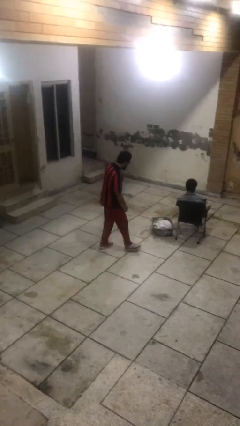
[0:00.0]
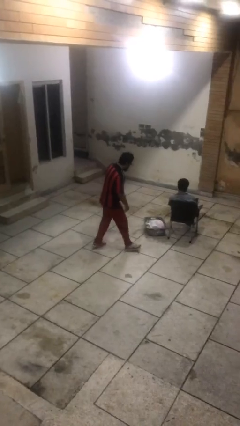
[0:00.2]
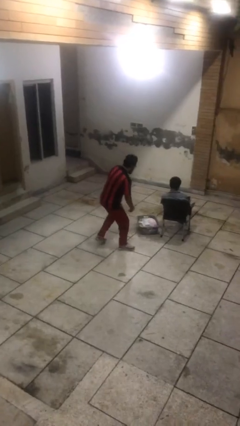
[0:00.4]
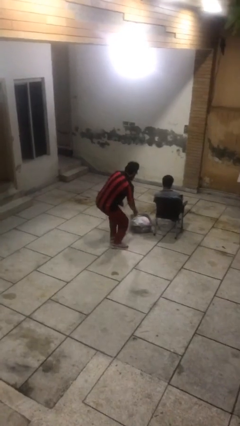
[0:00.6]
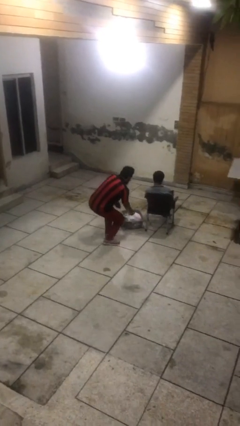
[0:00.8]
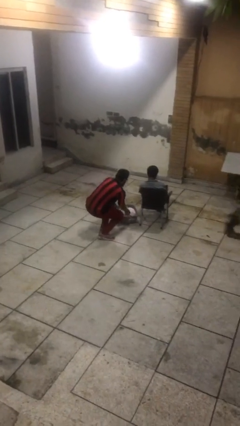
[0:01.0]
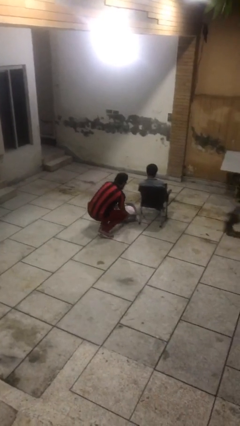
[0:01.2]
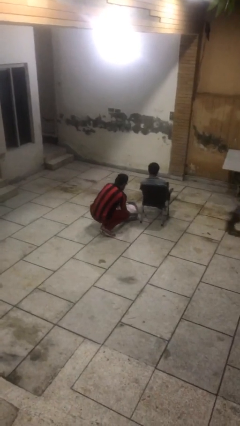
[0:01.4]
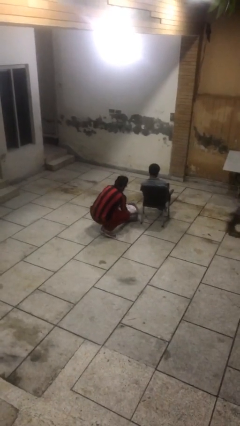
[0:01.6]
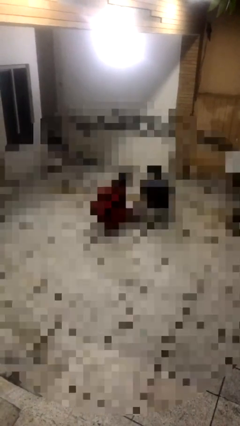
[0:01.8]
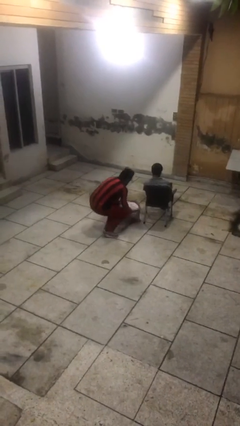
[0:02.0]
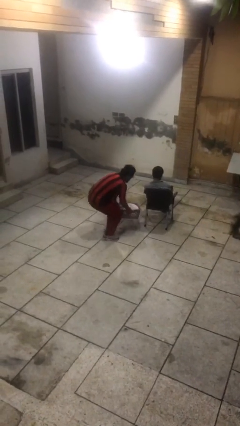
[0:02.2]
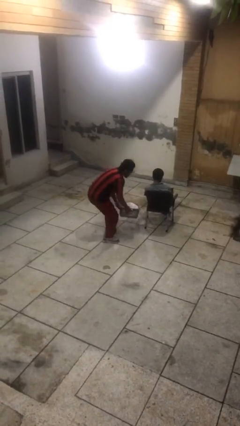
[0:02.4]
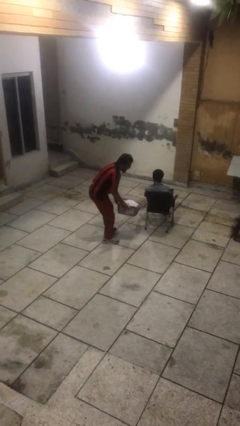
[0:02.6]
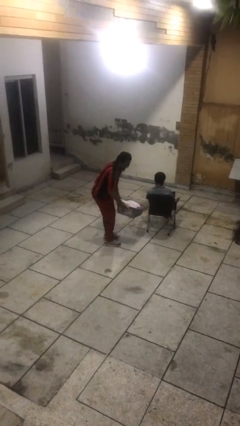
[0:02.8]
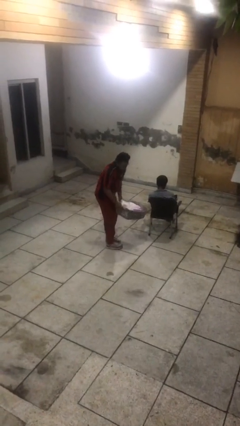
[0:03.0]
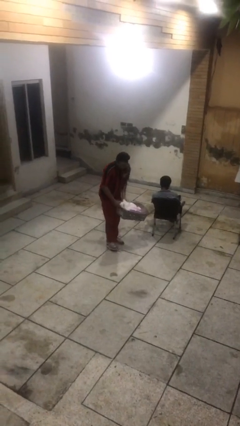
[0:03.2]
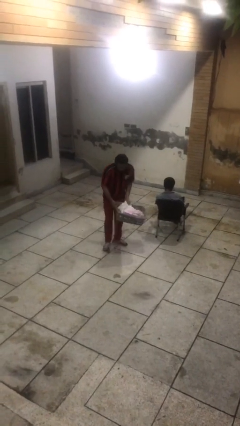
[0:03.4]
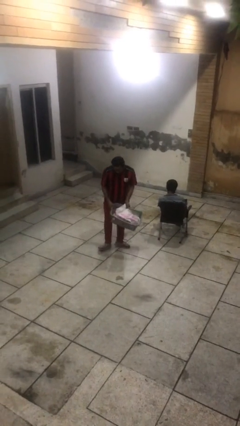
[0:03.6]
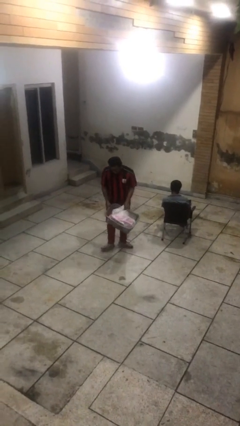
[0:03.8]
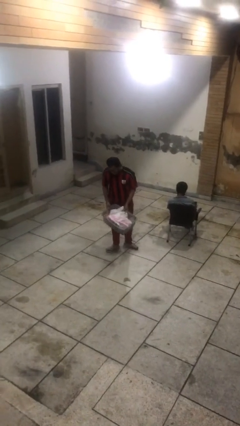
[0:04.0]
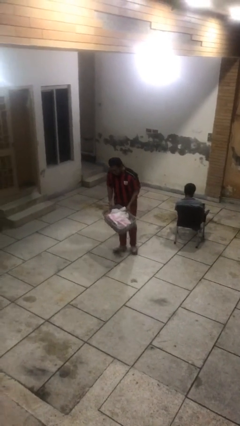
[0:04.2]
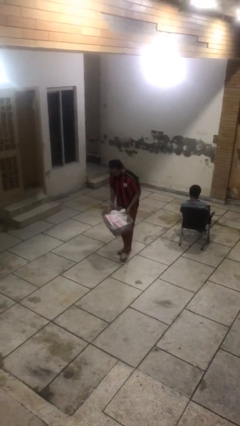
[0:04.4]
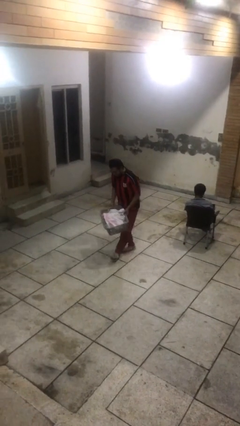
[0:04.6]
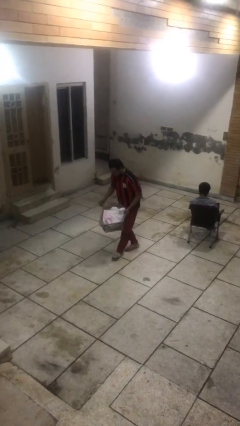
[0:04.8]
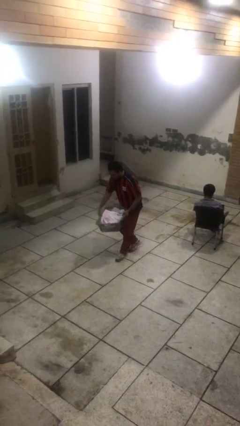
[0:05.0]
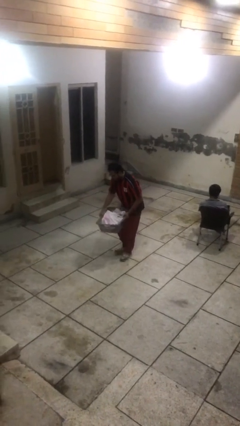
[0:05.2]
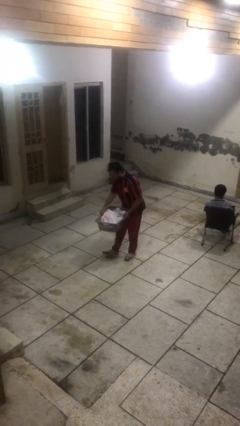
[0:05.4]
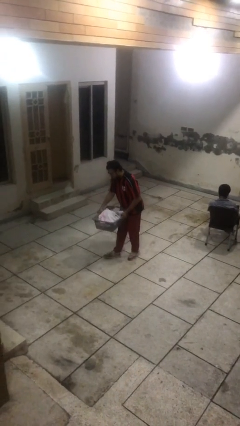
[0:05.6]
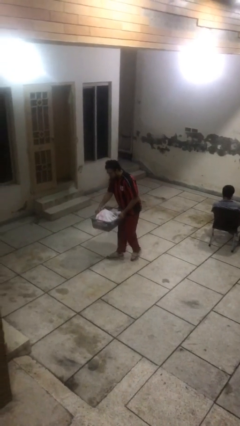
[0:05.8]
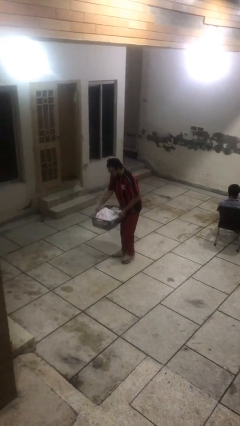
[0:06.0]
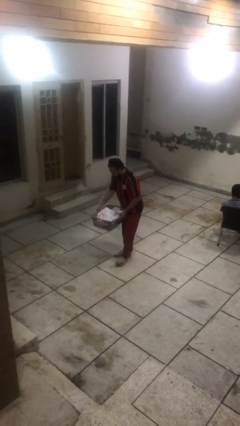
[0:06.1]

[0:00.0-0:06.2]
person steals object from person

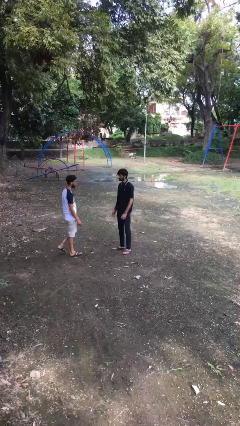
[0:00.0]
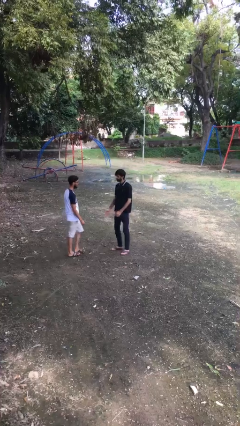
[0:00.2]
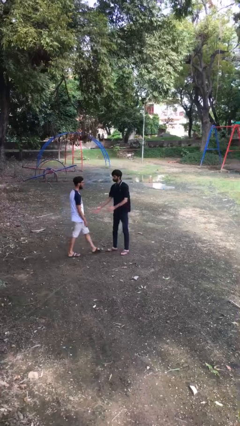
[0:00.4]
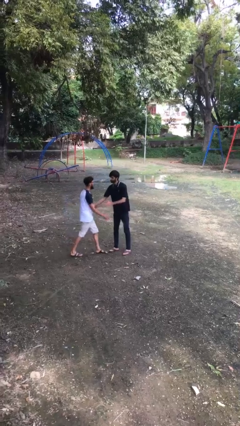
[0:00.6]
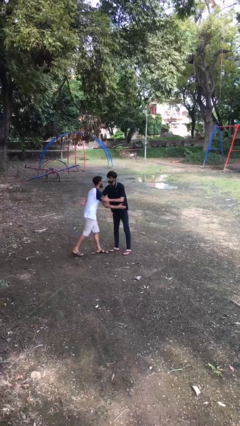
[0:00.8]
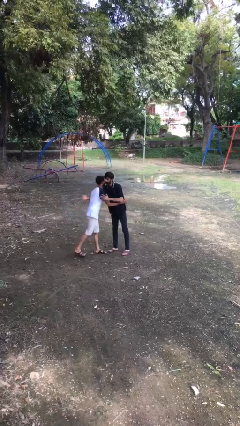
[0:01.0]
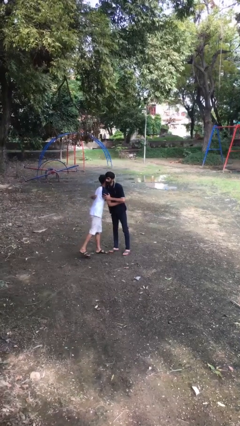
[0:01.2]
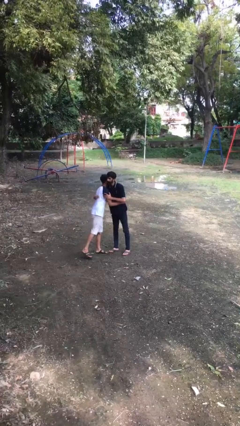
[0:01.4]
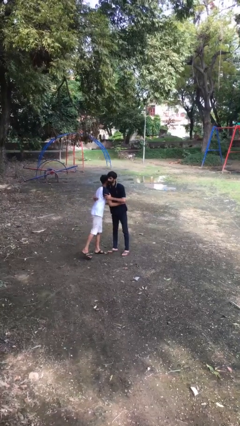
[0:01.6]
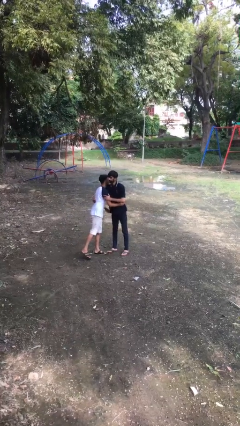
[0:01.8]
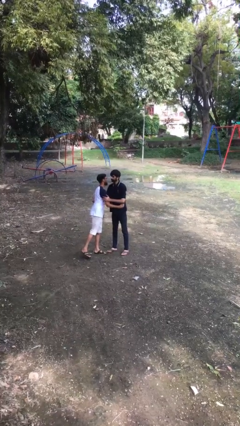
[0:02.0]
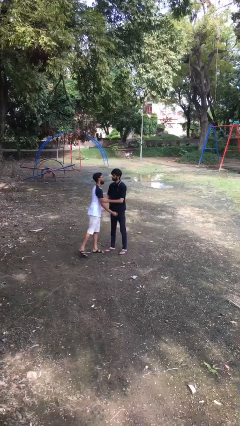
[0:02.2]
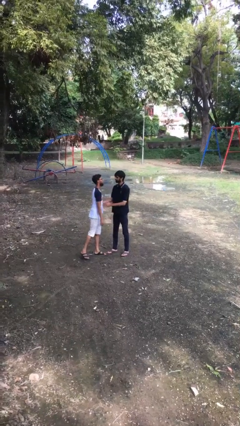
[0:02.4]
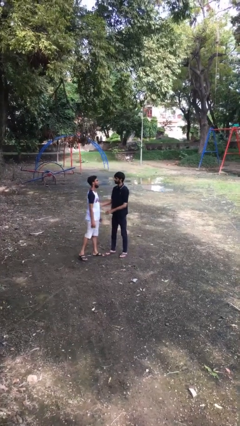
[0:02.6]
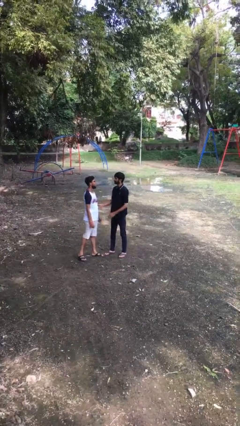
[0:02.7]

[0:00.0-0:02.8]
person embraces person

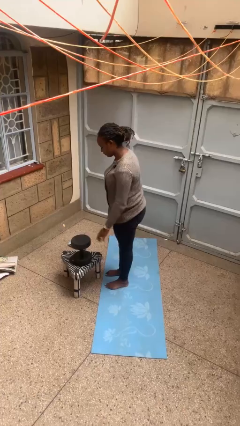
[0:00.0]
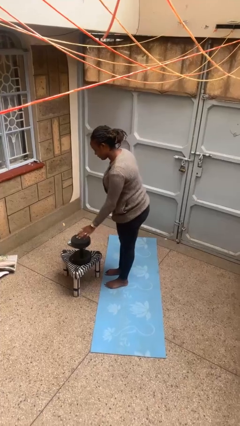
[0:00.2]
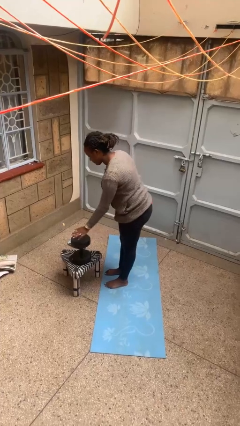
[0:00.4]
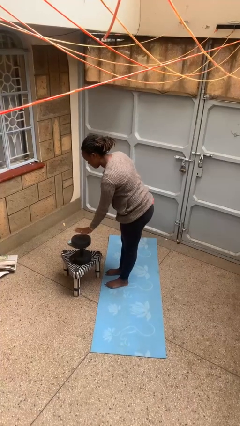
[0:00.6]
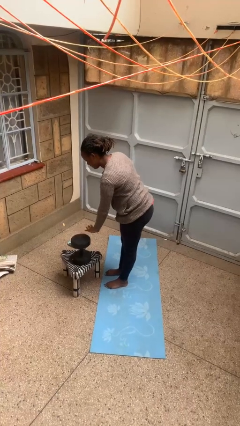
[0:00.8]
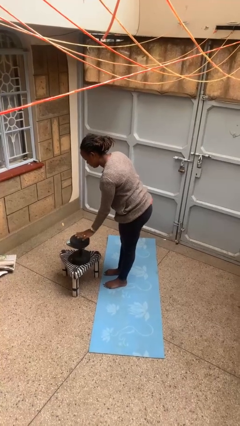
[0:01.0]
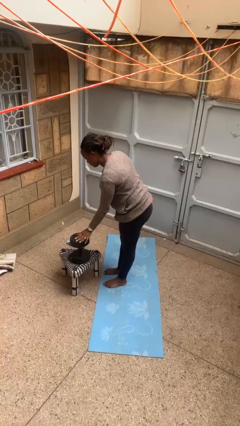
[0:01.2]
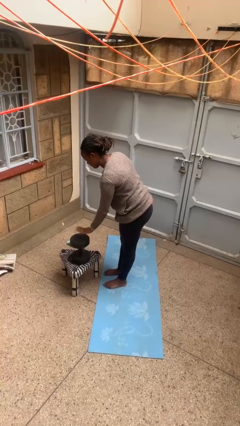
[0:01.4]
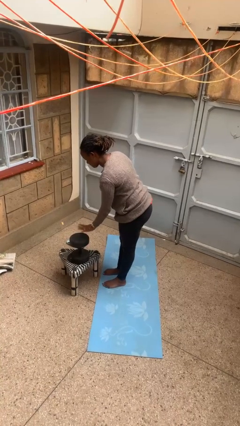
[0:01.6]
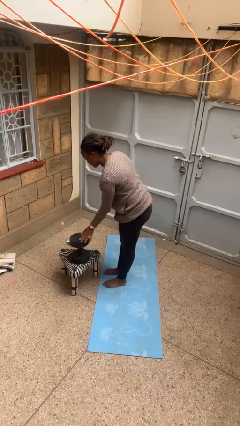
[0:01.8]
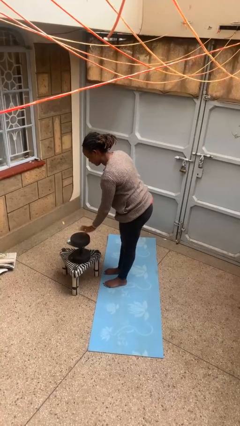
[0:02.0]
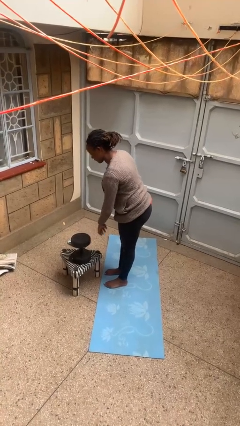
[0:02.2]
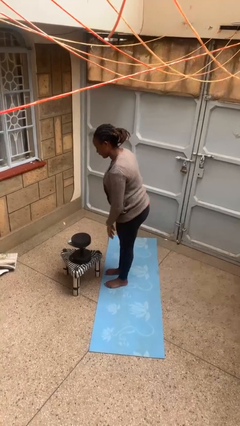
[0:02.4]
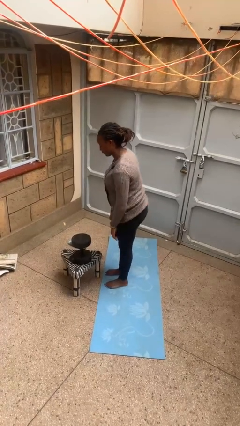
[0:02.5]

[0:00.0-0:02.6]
person waves hand over object

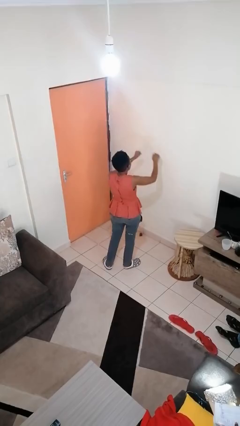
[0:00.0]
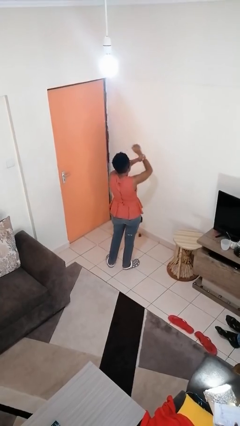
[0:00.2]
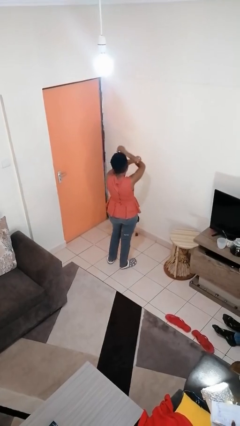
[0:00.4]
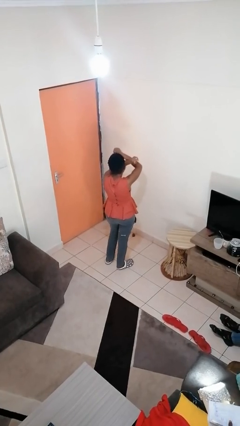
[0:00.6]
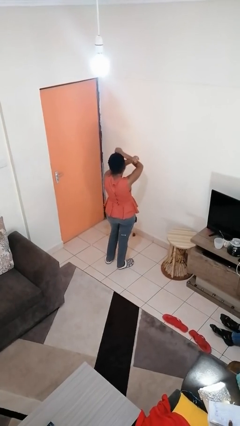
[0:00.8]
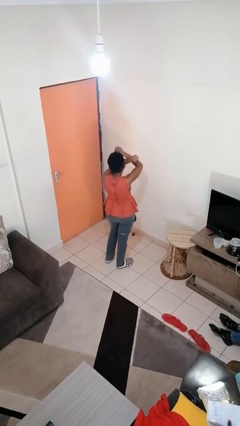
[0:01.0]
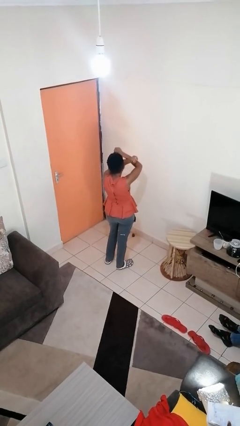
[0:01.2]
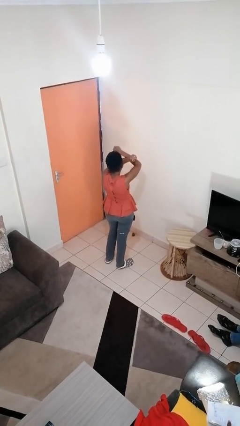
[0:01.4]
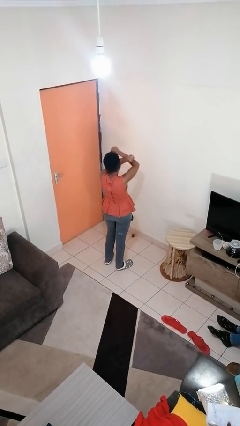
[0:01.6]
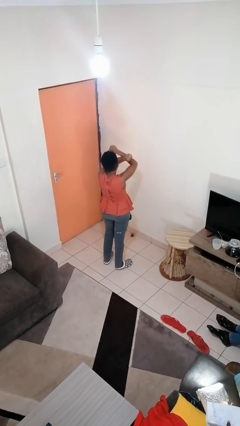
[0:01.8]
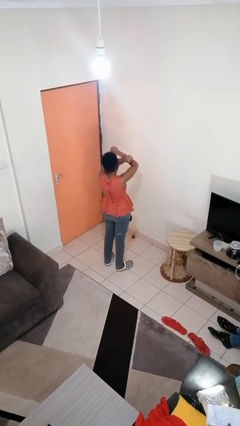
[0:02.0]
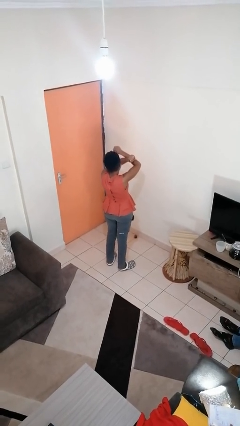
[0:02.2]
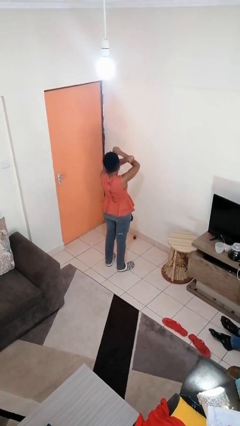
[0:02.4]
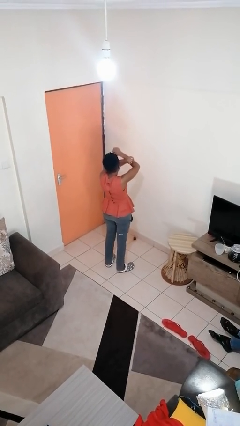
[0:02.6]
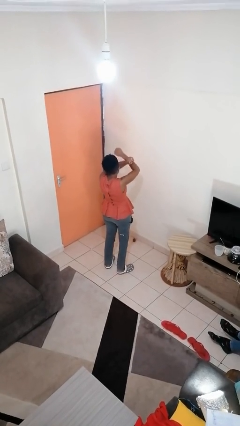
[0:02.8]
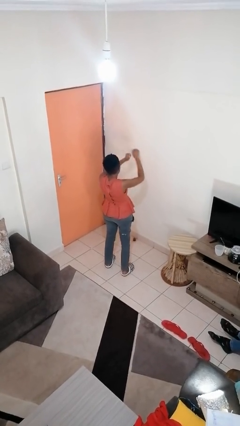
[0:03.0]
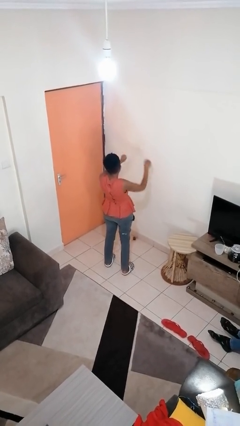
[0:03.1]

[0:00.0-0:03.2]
person gestures arms x

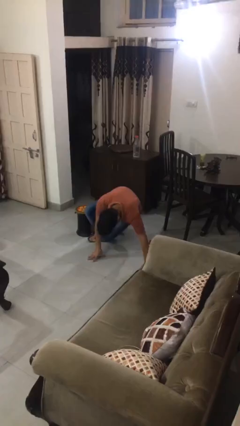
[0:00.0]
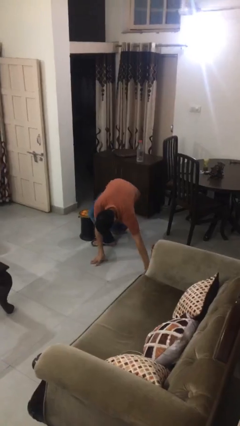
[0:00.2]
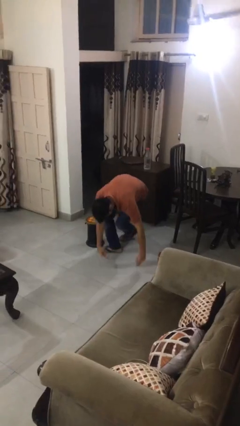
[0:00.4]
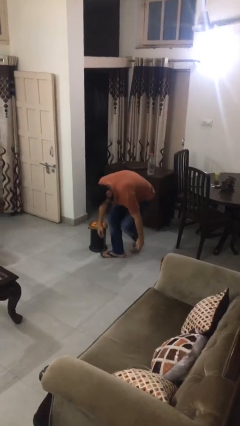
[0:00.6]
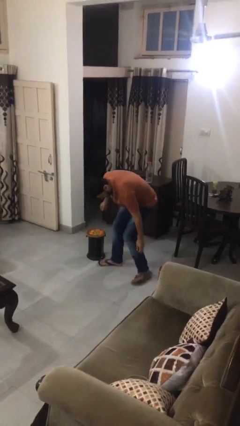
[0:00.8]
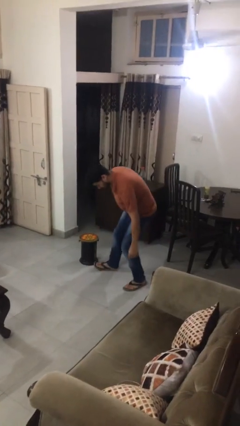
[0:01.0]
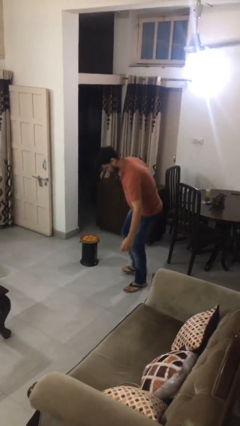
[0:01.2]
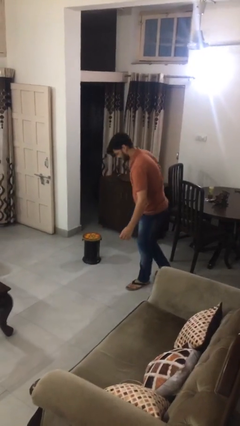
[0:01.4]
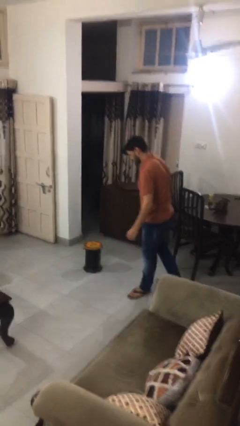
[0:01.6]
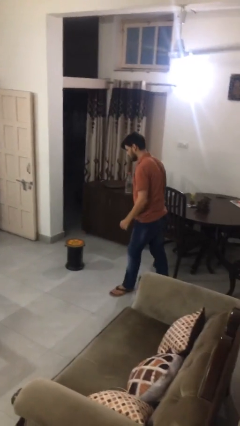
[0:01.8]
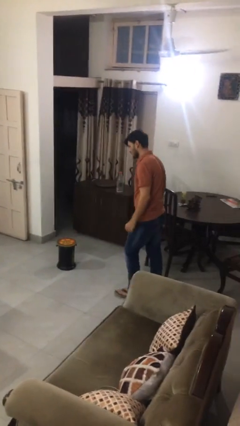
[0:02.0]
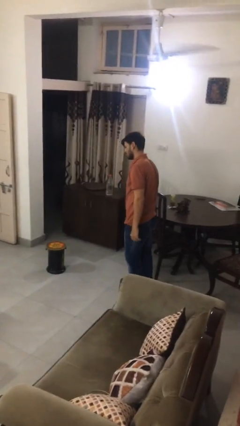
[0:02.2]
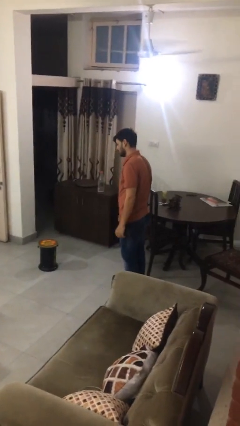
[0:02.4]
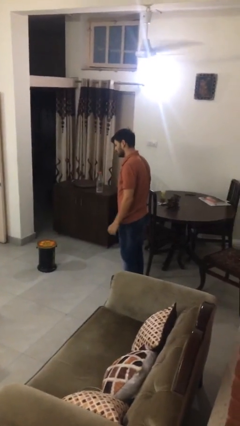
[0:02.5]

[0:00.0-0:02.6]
person stands up from floor
